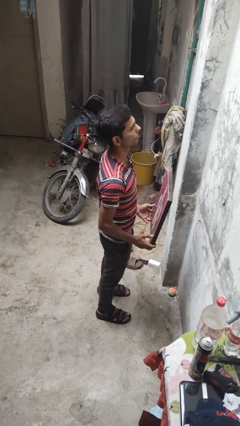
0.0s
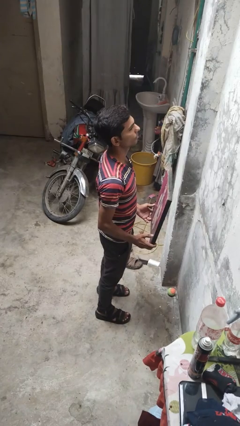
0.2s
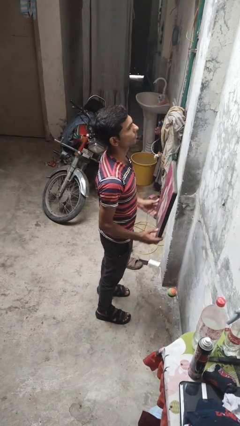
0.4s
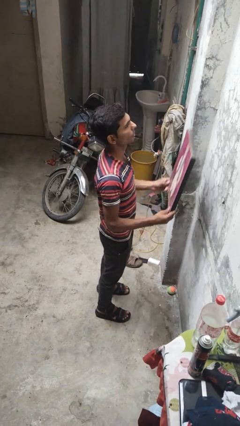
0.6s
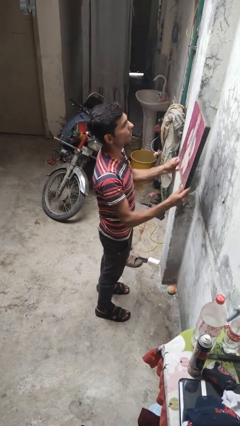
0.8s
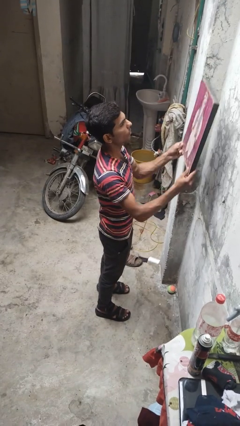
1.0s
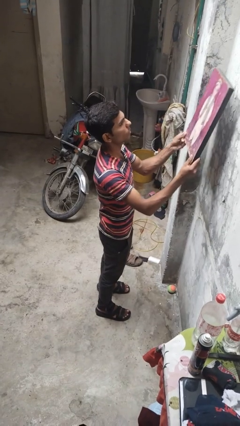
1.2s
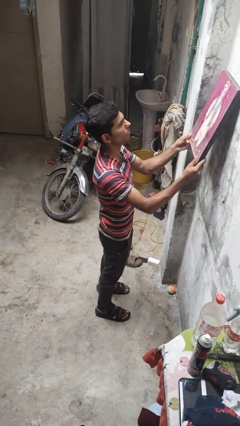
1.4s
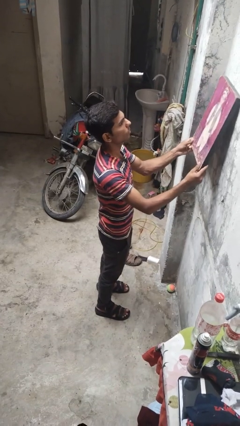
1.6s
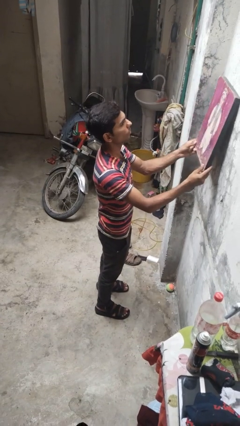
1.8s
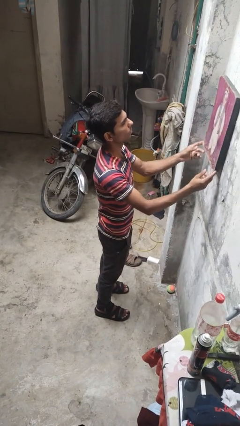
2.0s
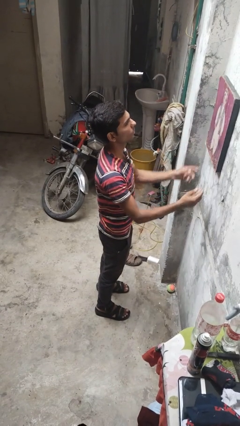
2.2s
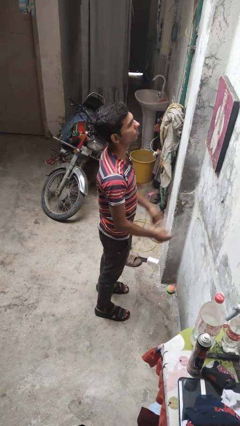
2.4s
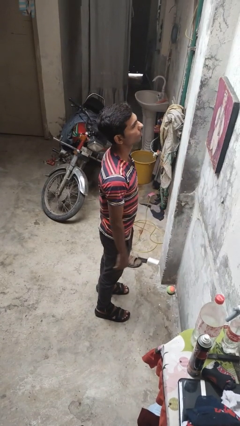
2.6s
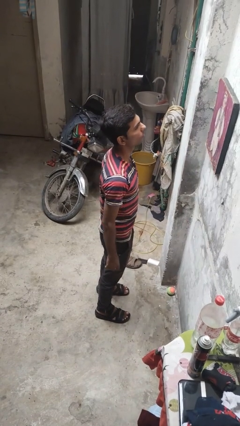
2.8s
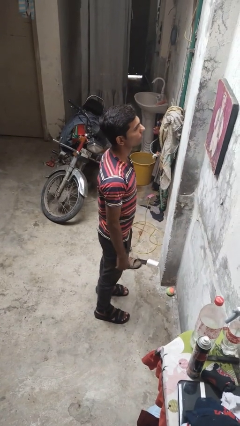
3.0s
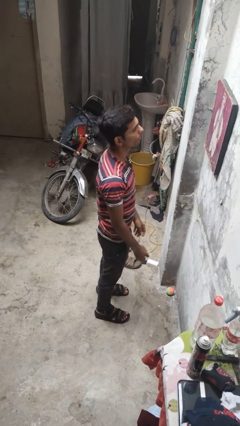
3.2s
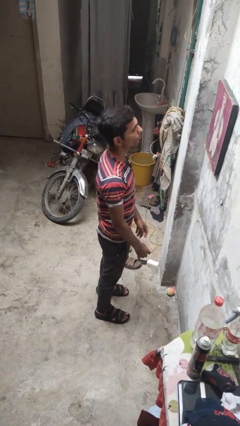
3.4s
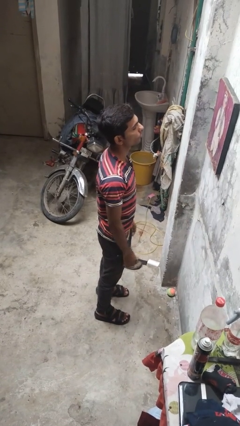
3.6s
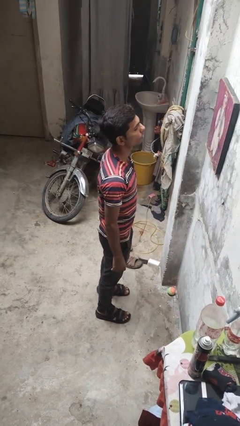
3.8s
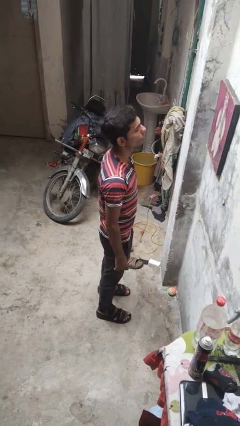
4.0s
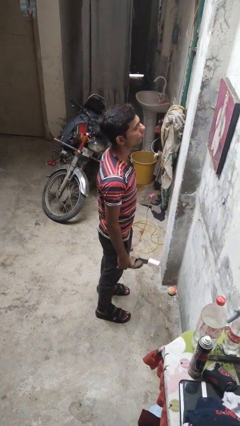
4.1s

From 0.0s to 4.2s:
person puts up picture frame

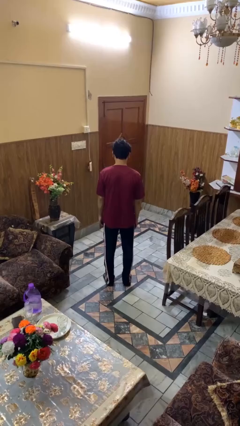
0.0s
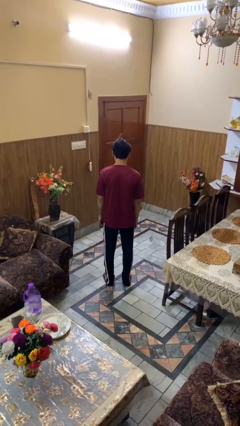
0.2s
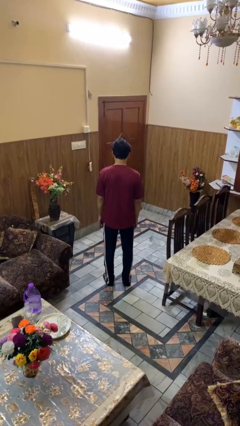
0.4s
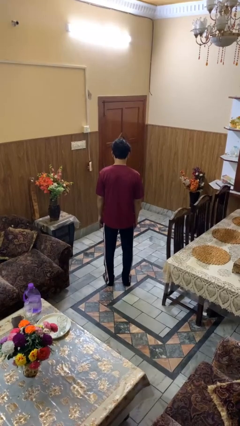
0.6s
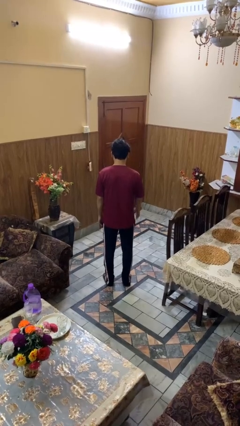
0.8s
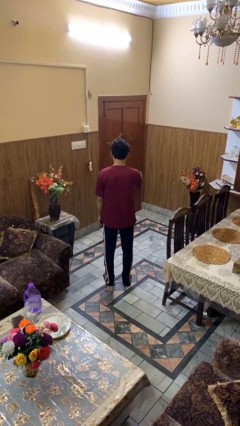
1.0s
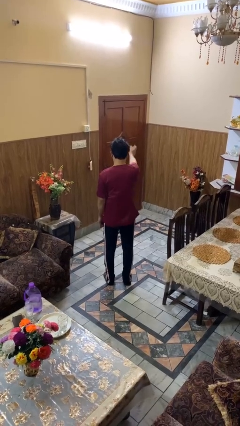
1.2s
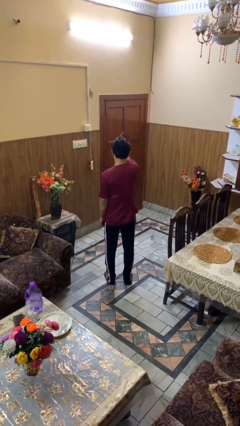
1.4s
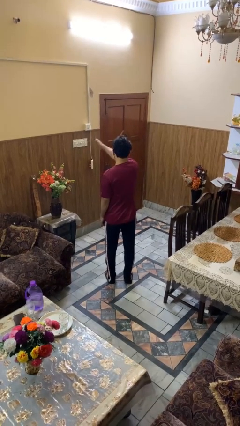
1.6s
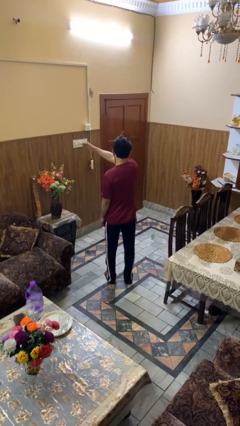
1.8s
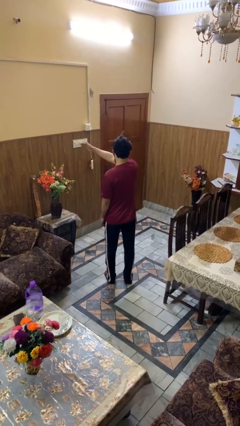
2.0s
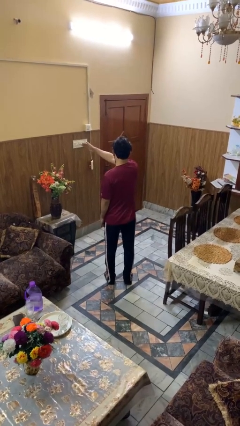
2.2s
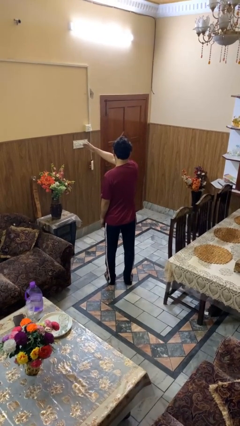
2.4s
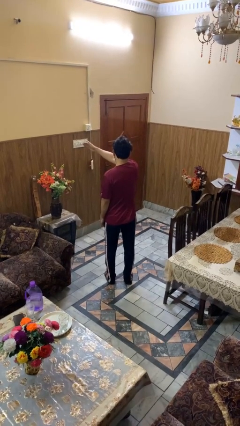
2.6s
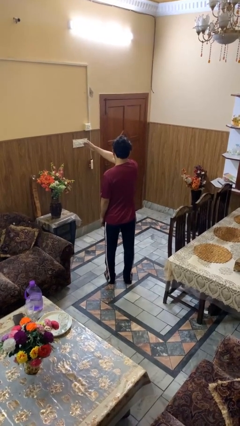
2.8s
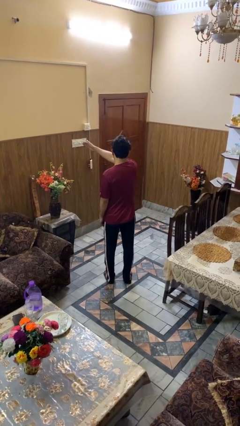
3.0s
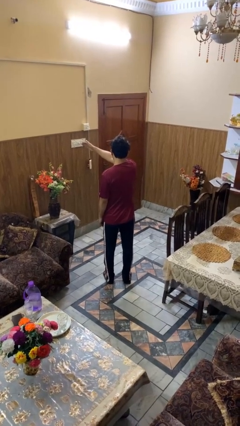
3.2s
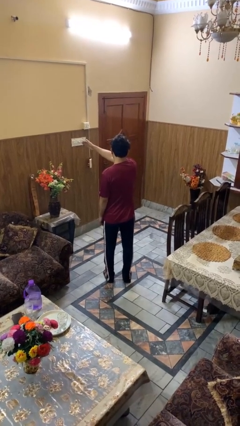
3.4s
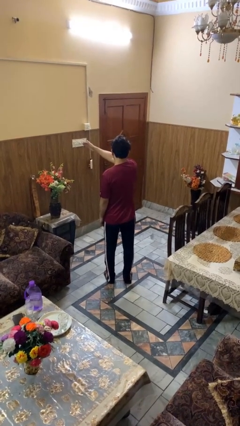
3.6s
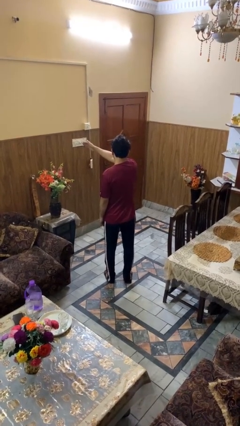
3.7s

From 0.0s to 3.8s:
person gestures swipe left

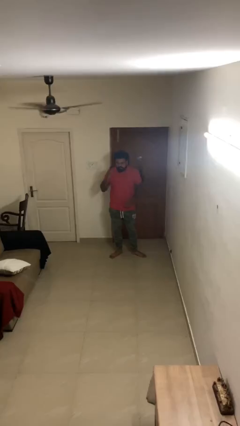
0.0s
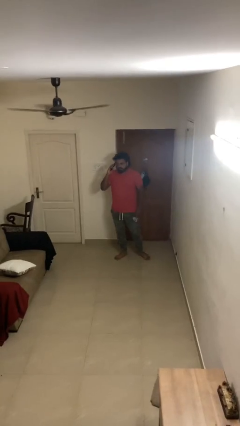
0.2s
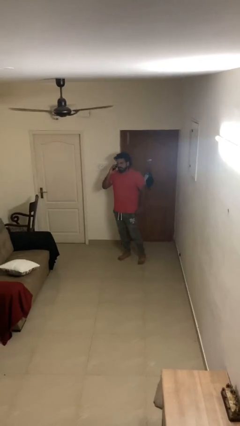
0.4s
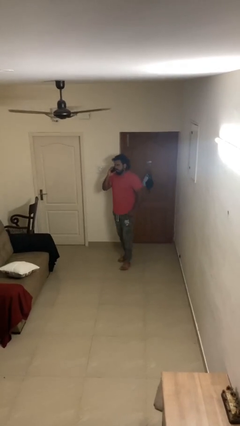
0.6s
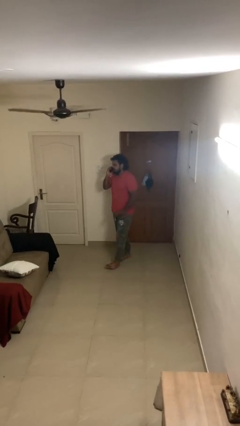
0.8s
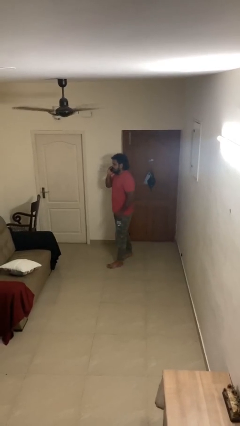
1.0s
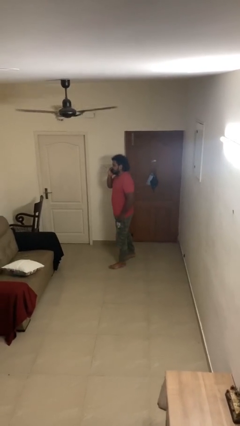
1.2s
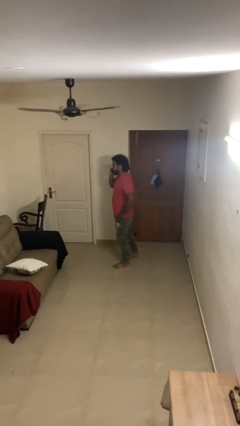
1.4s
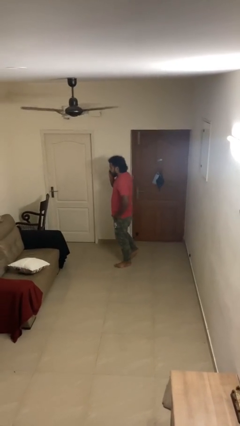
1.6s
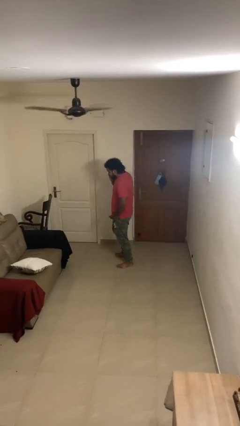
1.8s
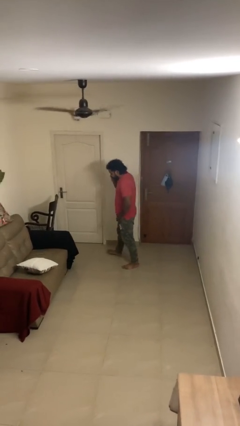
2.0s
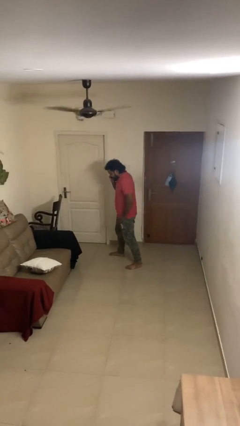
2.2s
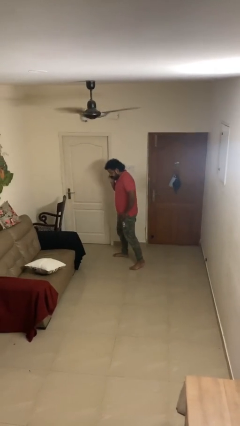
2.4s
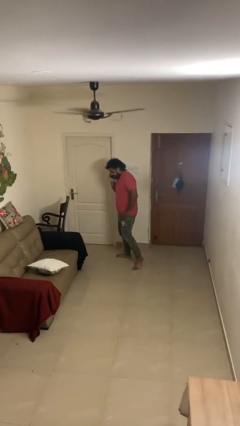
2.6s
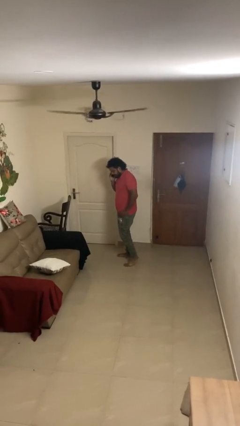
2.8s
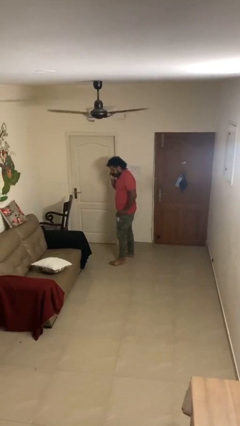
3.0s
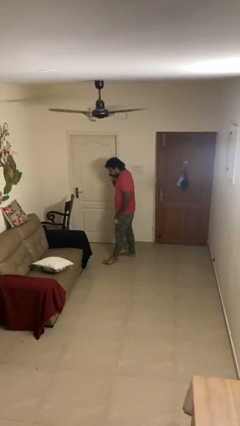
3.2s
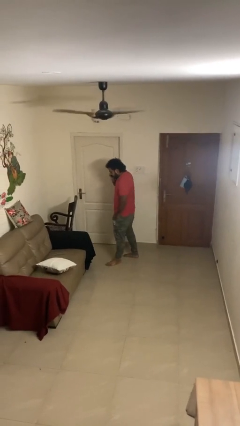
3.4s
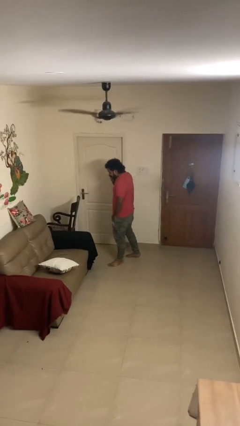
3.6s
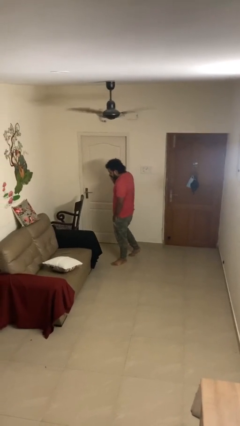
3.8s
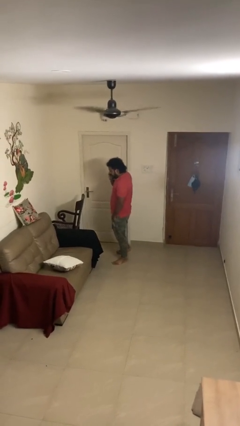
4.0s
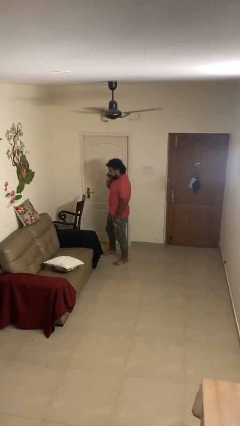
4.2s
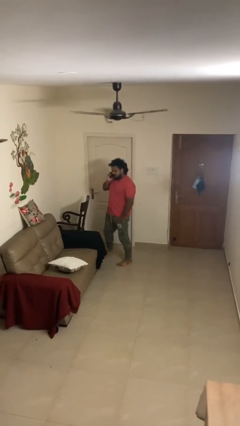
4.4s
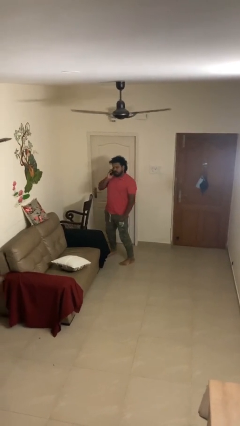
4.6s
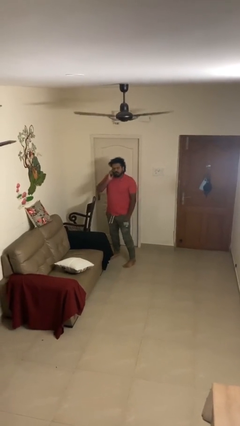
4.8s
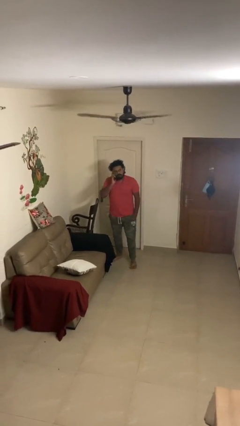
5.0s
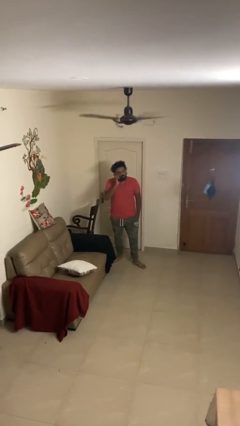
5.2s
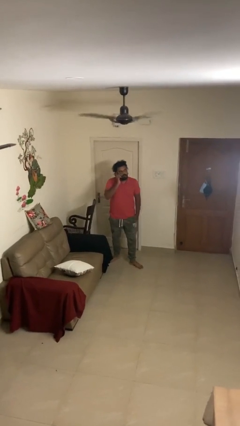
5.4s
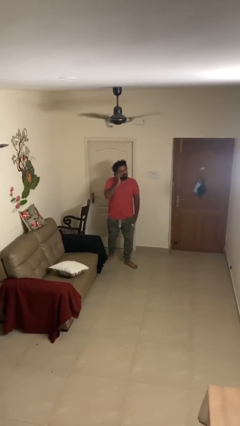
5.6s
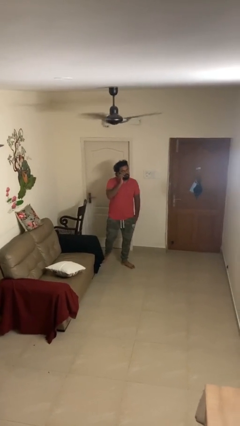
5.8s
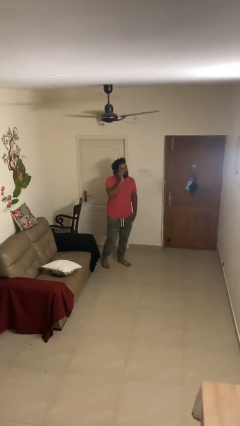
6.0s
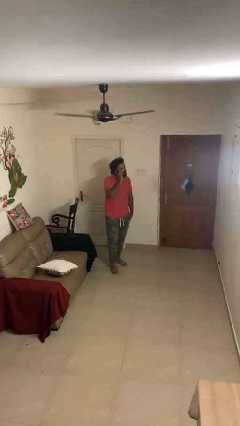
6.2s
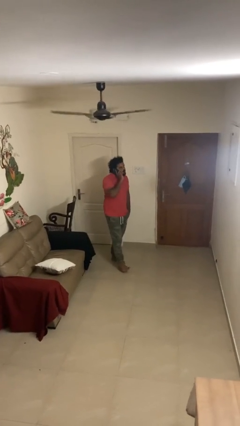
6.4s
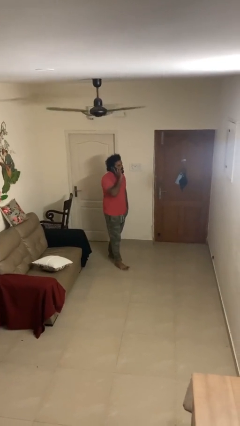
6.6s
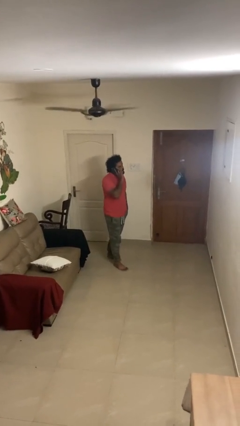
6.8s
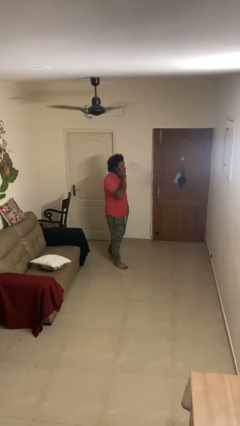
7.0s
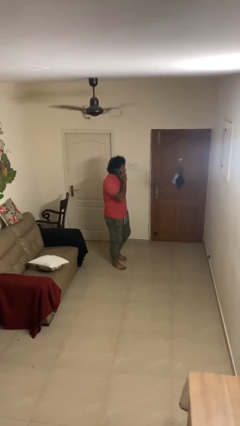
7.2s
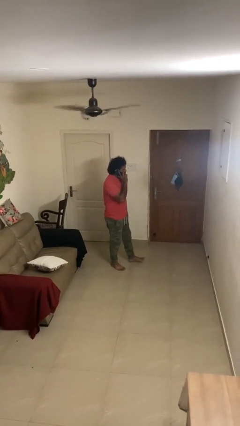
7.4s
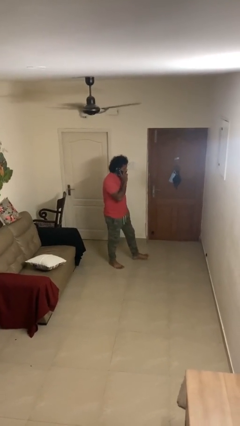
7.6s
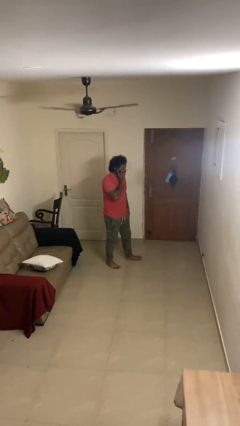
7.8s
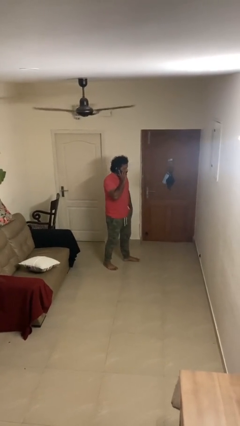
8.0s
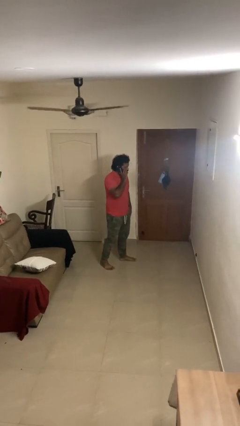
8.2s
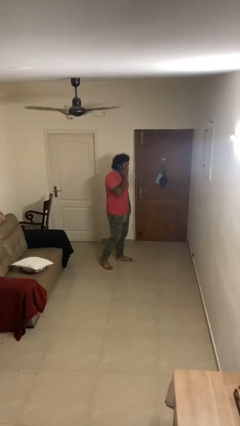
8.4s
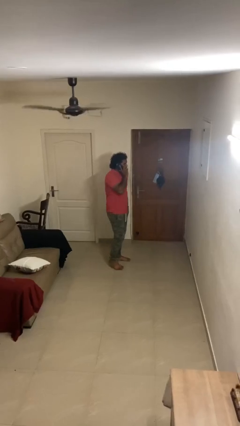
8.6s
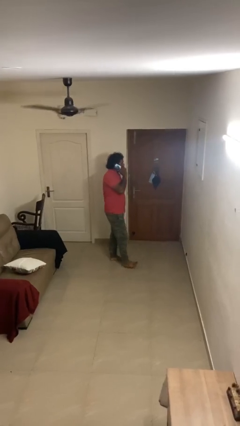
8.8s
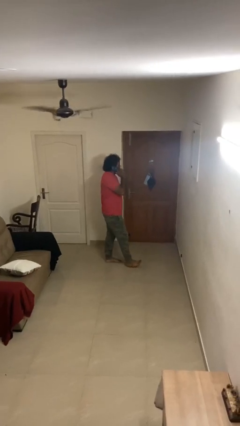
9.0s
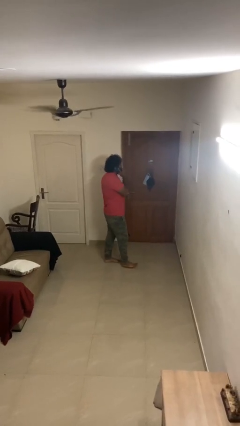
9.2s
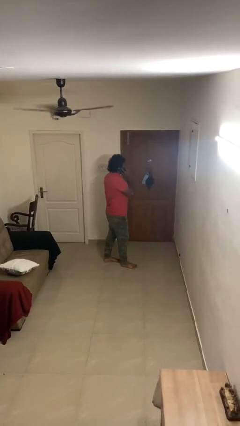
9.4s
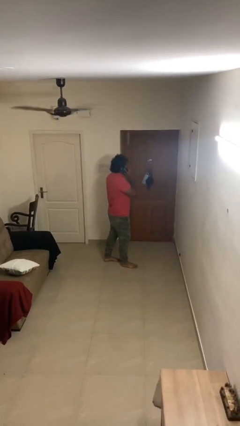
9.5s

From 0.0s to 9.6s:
person talks on phone
